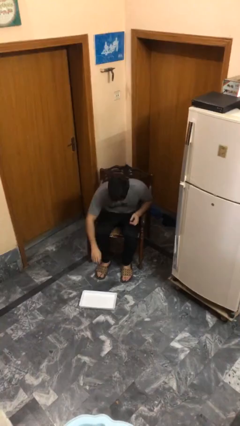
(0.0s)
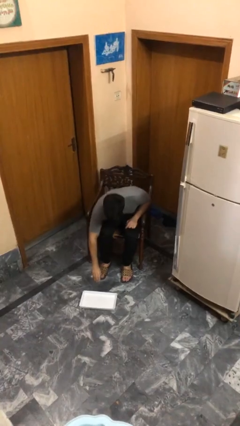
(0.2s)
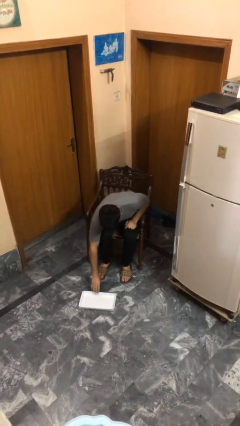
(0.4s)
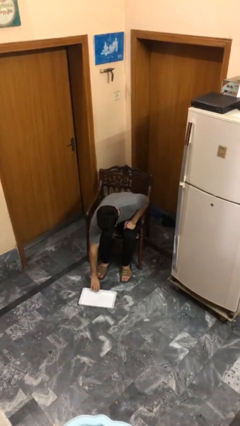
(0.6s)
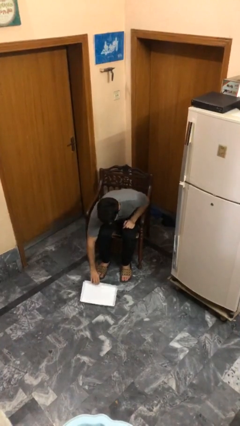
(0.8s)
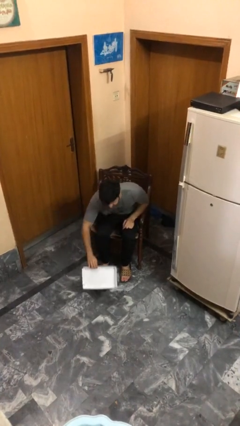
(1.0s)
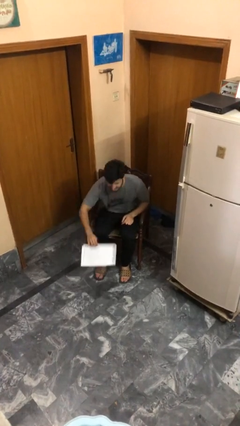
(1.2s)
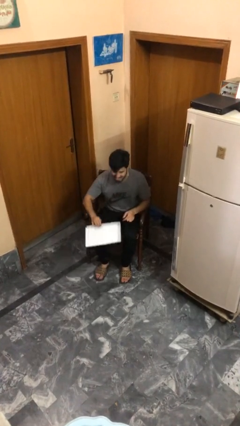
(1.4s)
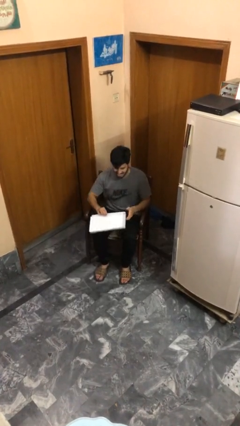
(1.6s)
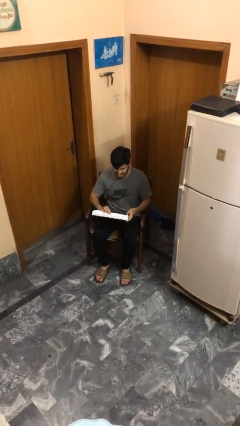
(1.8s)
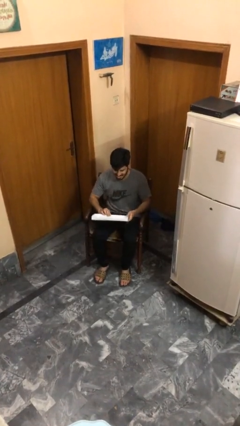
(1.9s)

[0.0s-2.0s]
person picks up object from floor

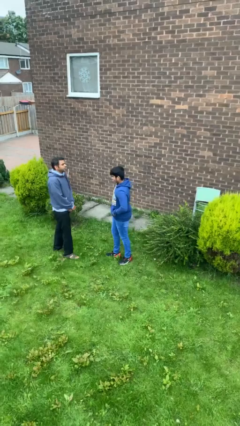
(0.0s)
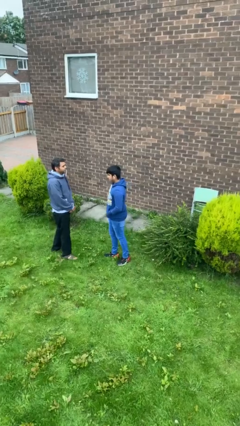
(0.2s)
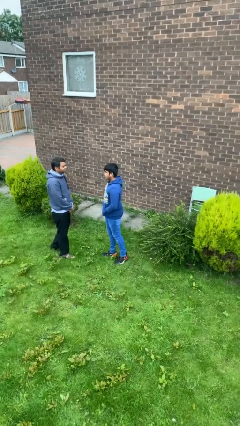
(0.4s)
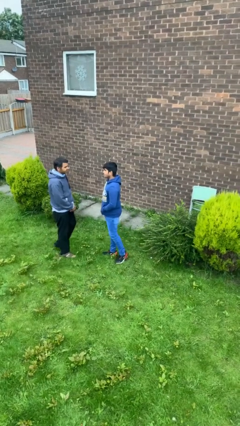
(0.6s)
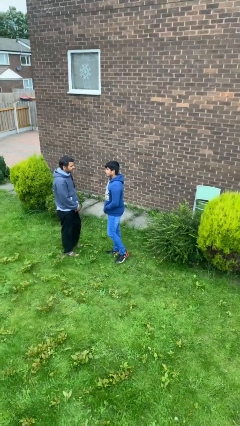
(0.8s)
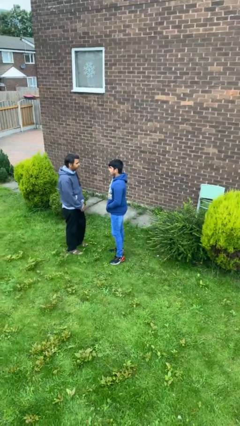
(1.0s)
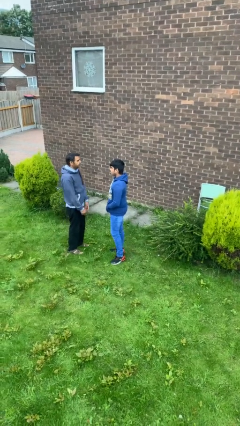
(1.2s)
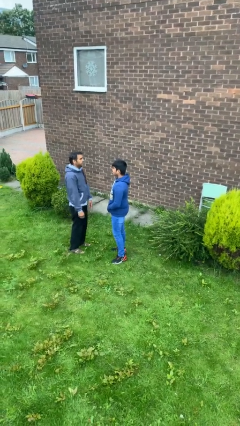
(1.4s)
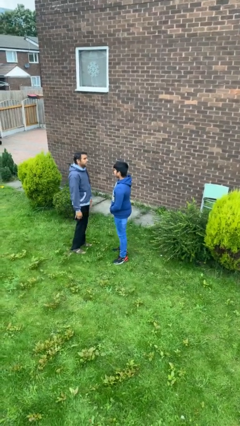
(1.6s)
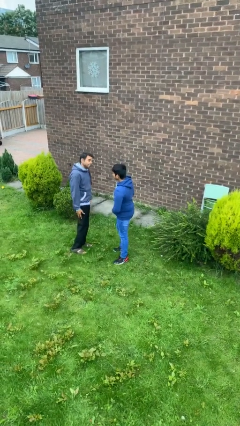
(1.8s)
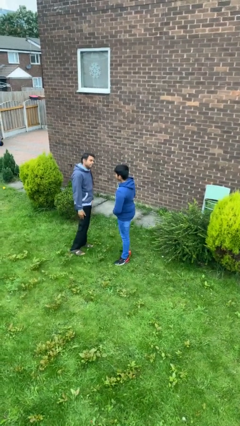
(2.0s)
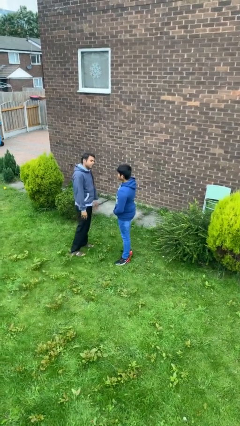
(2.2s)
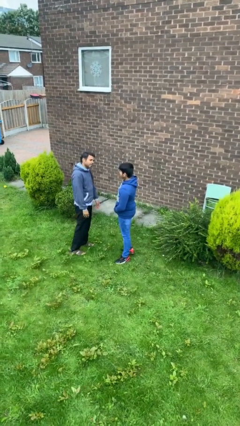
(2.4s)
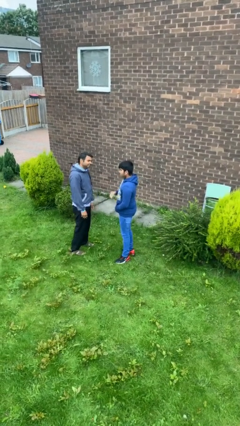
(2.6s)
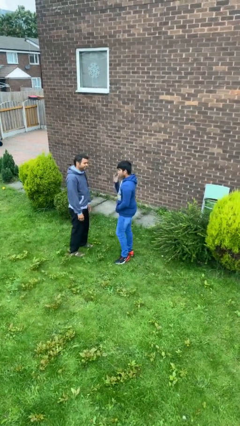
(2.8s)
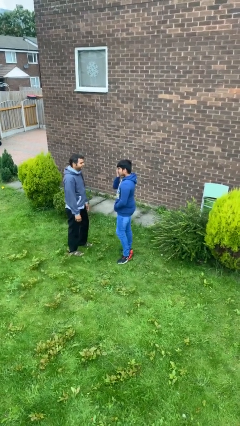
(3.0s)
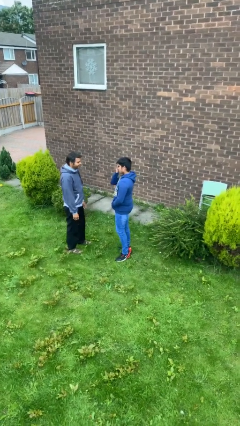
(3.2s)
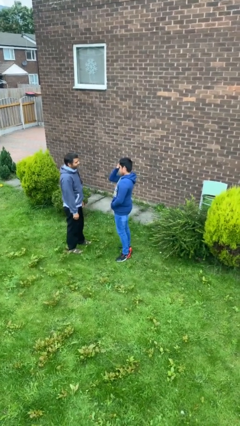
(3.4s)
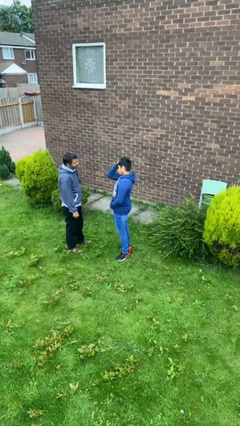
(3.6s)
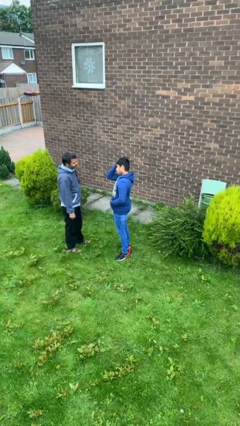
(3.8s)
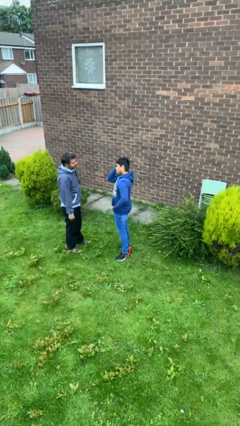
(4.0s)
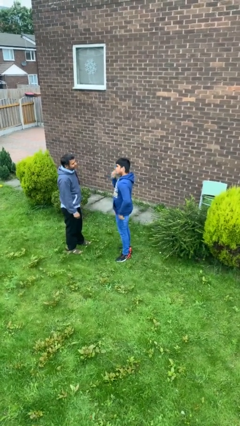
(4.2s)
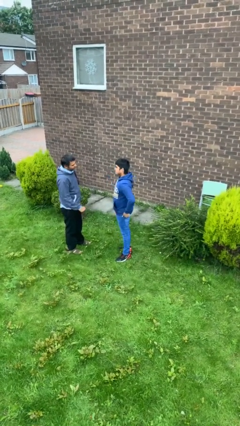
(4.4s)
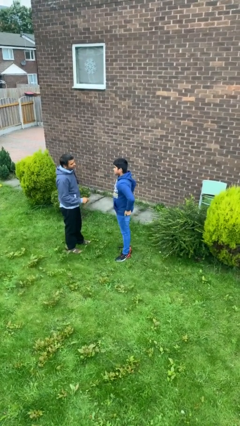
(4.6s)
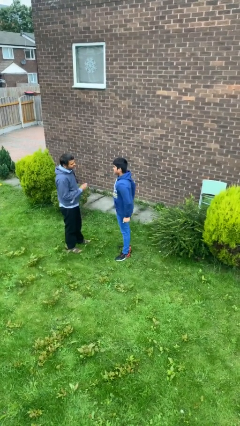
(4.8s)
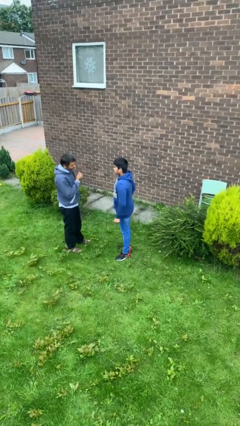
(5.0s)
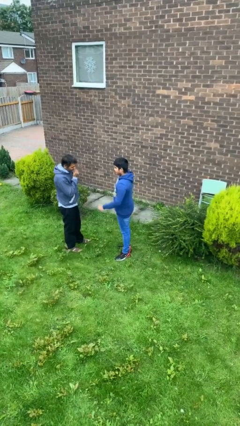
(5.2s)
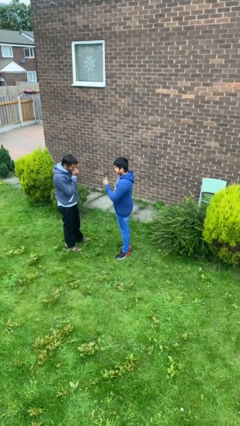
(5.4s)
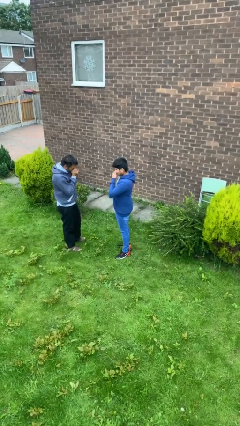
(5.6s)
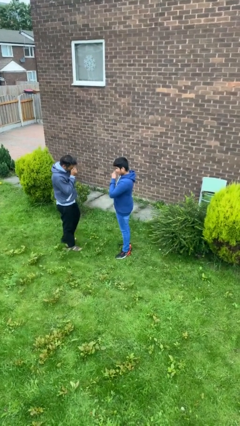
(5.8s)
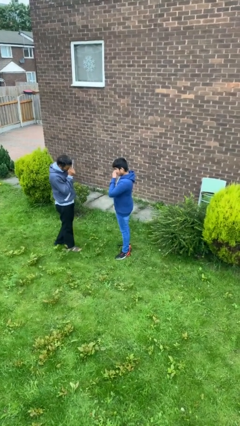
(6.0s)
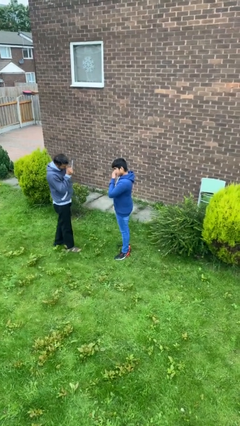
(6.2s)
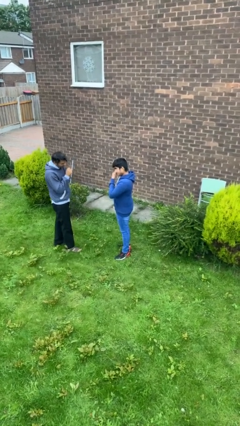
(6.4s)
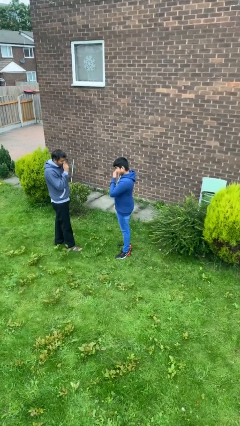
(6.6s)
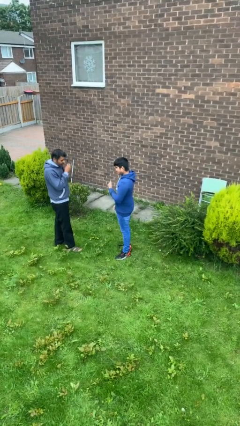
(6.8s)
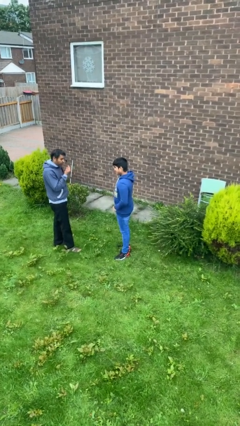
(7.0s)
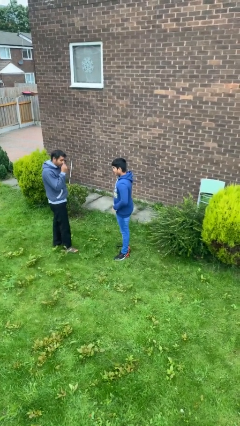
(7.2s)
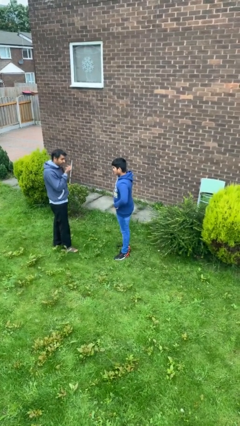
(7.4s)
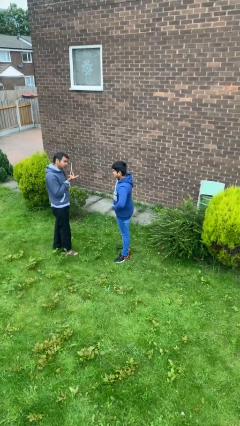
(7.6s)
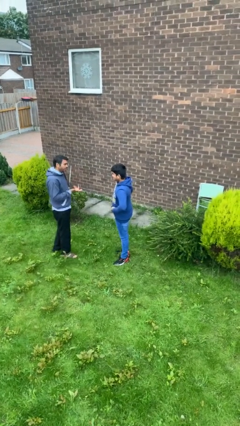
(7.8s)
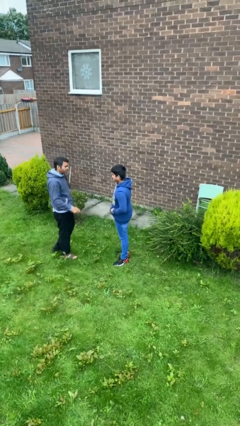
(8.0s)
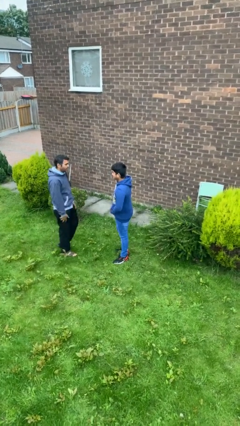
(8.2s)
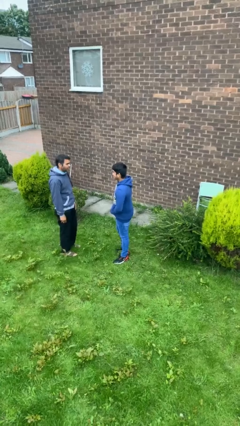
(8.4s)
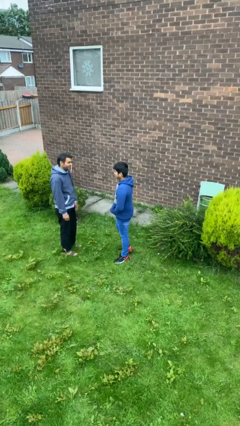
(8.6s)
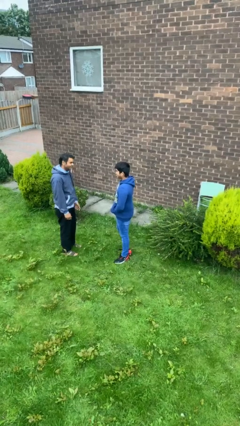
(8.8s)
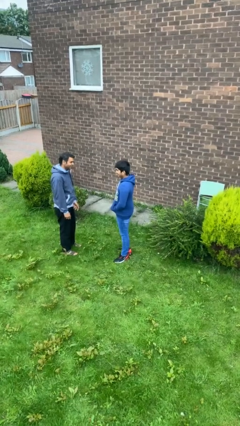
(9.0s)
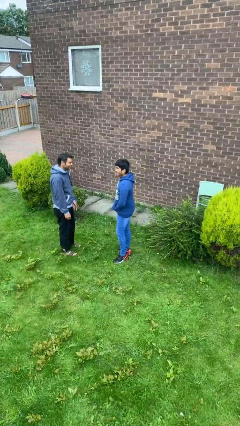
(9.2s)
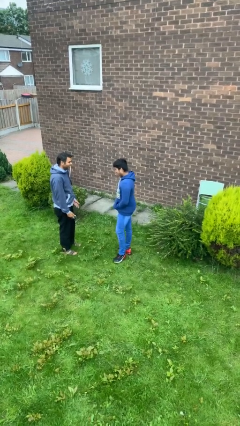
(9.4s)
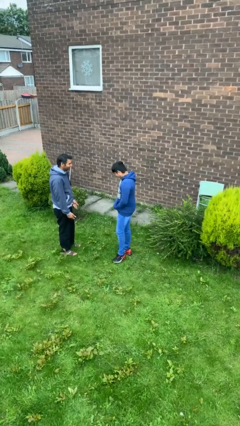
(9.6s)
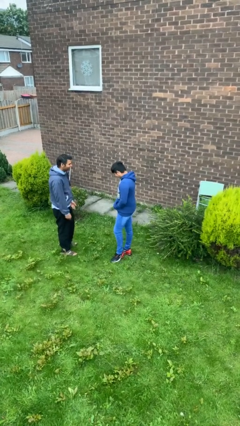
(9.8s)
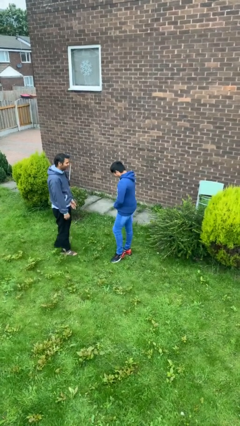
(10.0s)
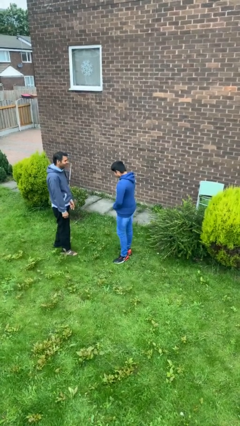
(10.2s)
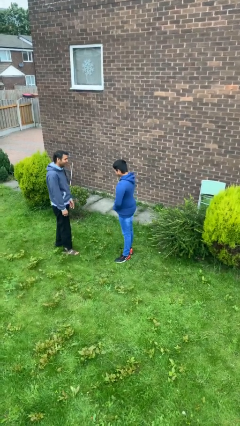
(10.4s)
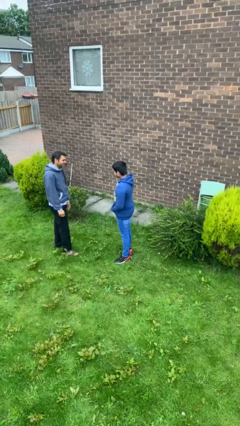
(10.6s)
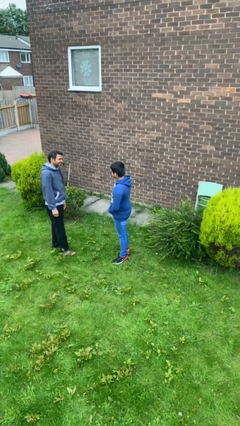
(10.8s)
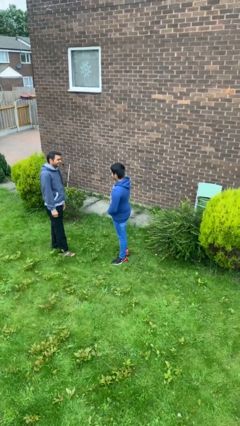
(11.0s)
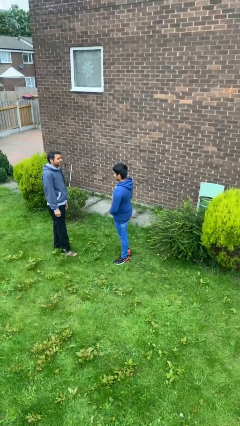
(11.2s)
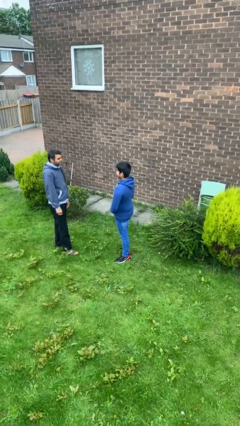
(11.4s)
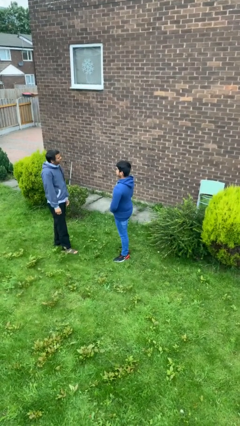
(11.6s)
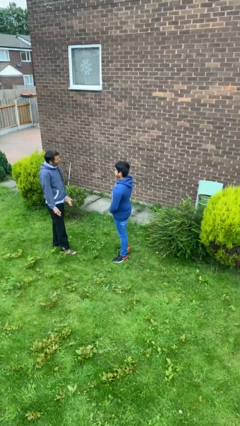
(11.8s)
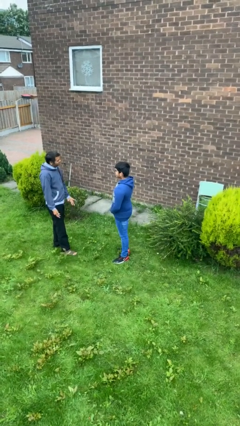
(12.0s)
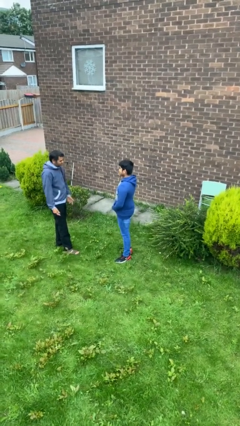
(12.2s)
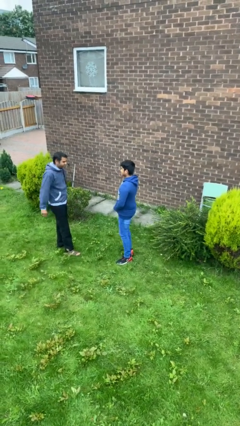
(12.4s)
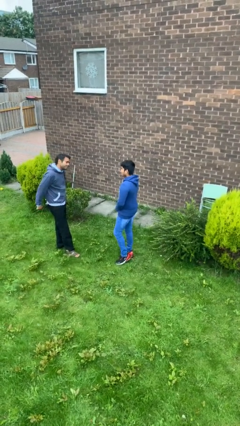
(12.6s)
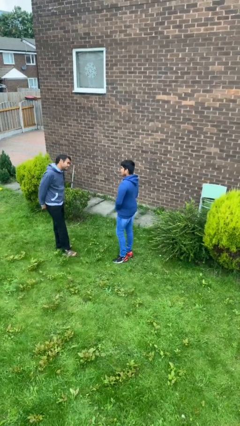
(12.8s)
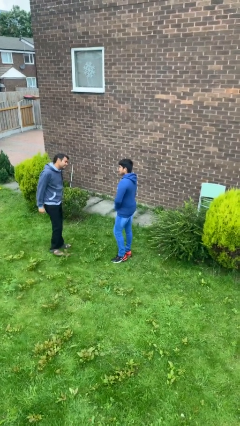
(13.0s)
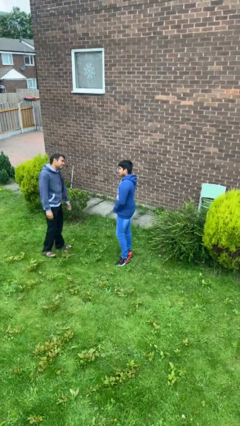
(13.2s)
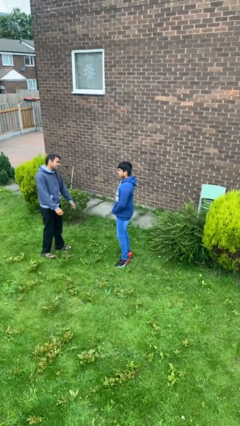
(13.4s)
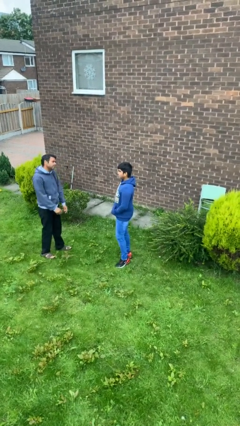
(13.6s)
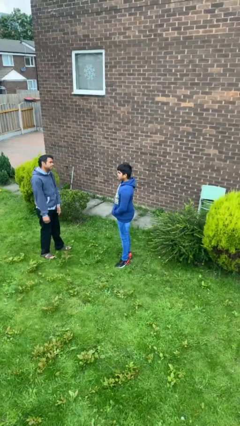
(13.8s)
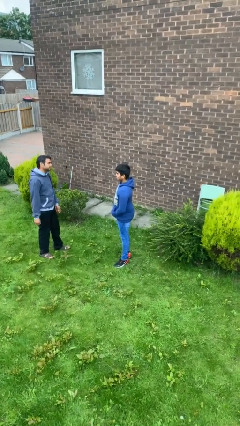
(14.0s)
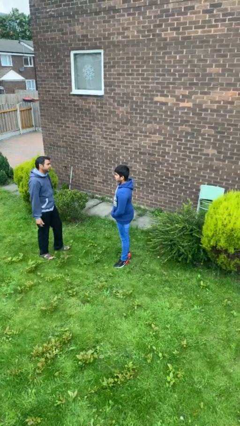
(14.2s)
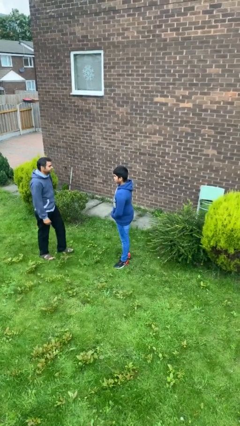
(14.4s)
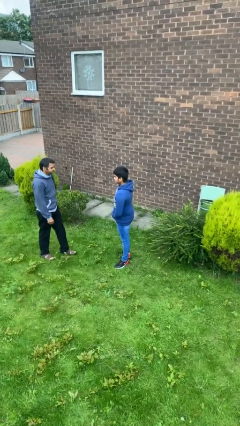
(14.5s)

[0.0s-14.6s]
person talks to person

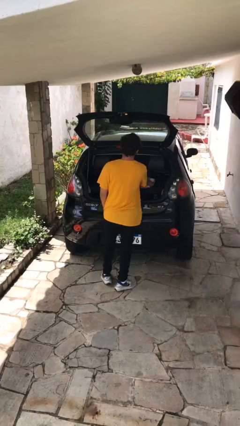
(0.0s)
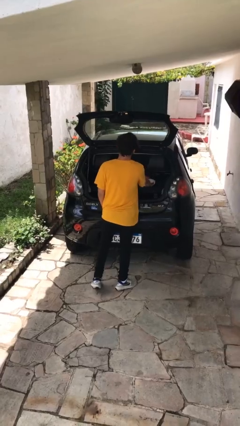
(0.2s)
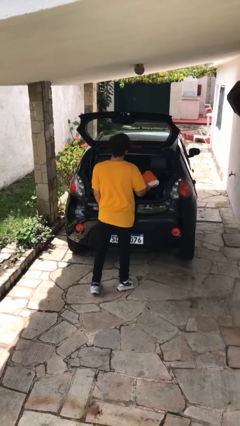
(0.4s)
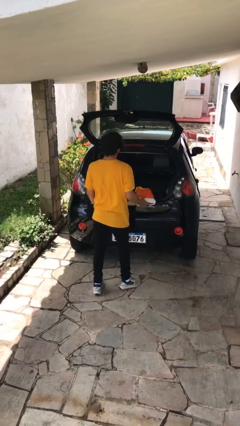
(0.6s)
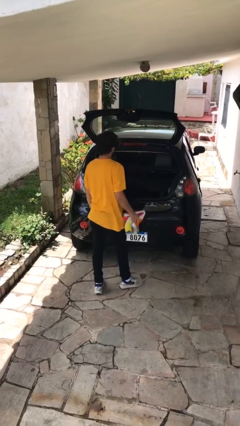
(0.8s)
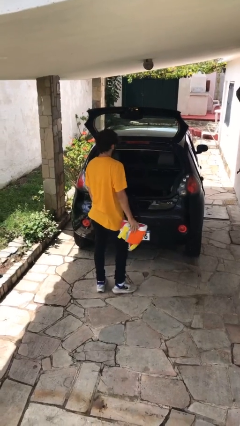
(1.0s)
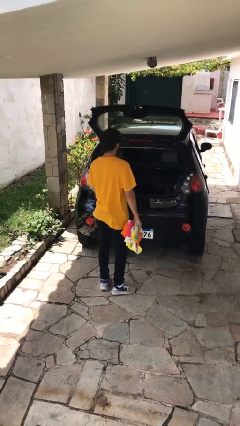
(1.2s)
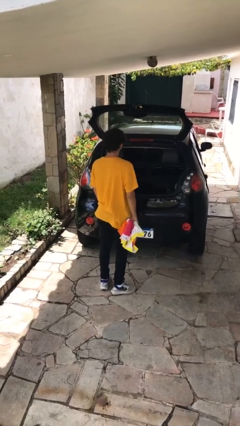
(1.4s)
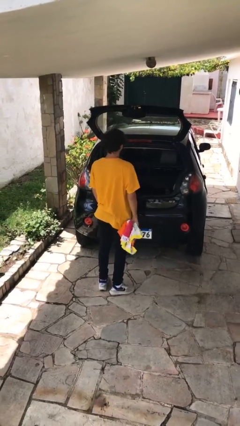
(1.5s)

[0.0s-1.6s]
person unloads car
